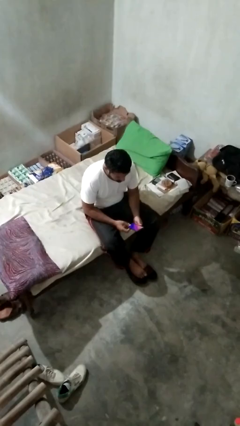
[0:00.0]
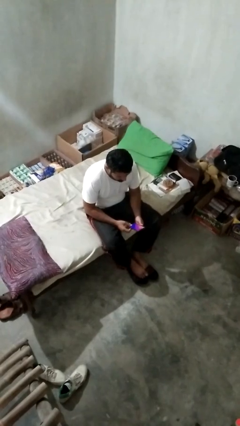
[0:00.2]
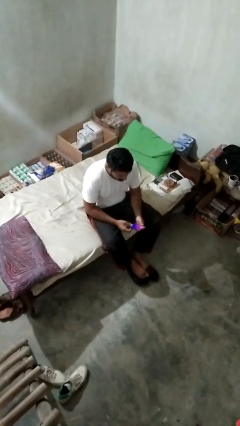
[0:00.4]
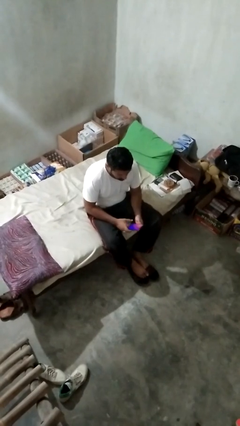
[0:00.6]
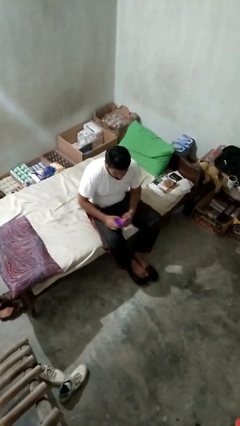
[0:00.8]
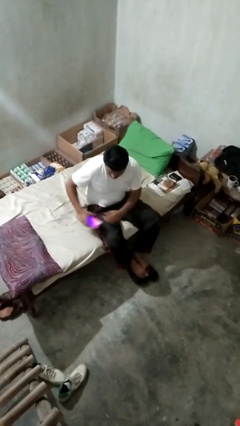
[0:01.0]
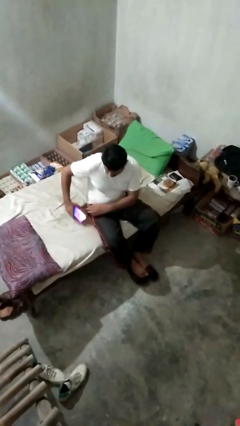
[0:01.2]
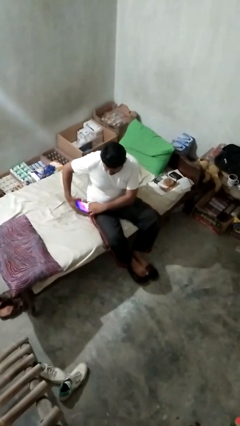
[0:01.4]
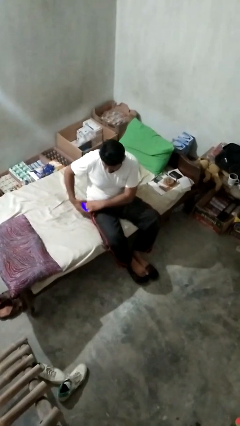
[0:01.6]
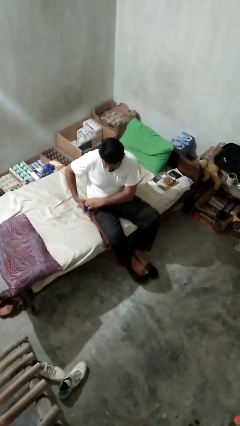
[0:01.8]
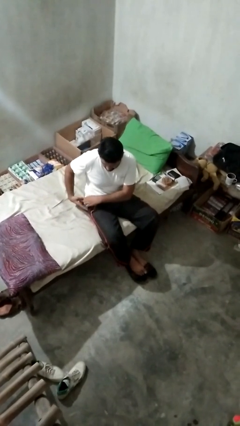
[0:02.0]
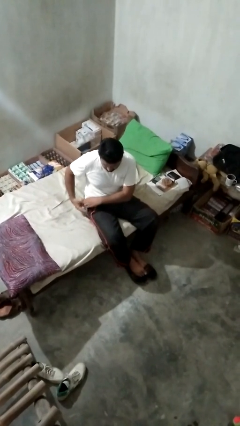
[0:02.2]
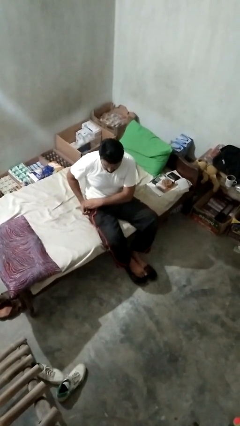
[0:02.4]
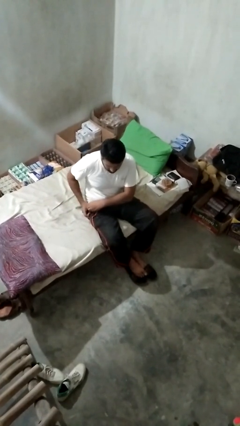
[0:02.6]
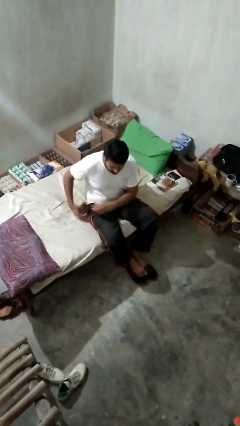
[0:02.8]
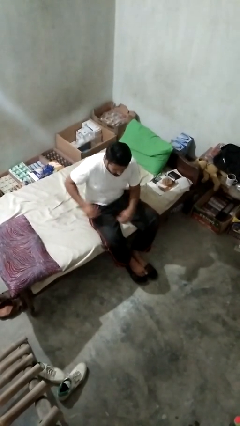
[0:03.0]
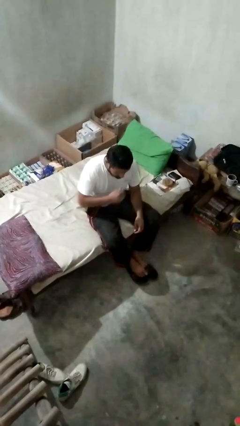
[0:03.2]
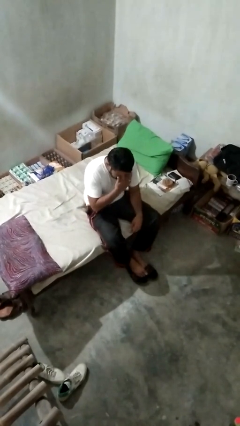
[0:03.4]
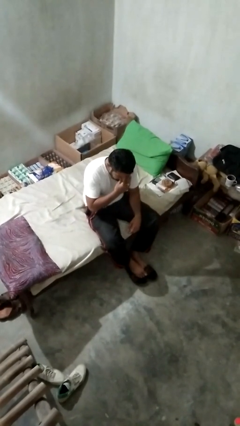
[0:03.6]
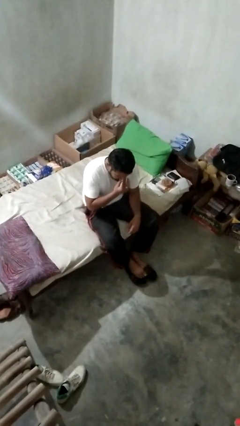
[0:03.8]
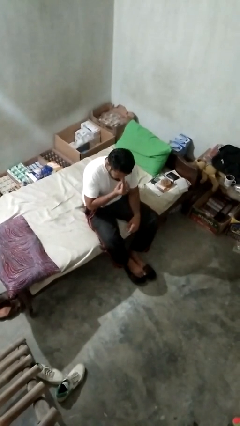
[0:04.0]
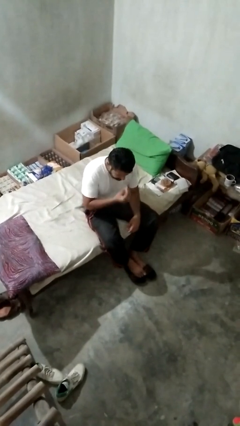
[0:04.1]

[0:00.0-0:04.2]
person puts phone into pocket

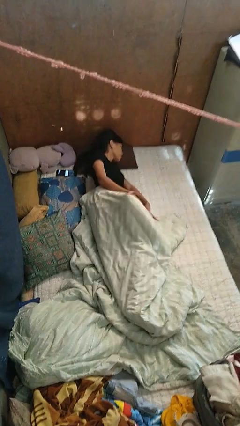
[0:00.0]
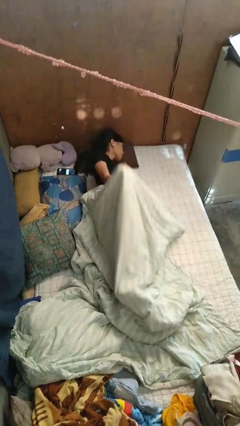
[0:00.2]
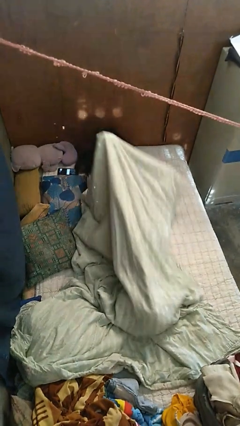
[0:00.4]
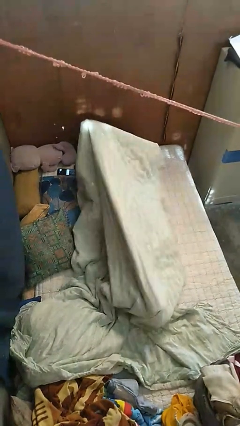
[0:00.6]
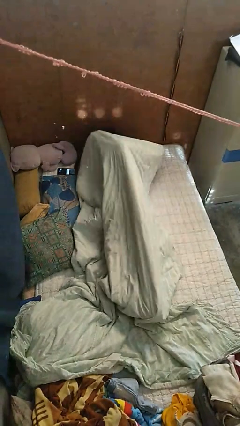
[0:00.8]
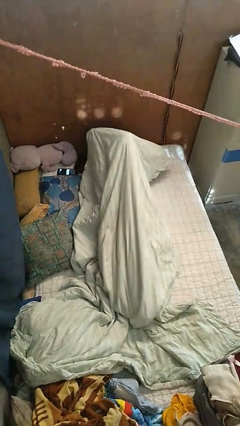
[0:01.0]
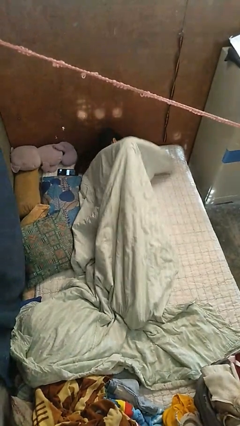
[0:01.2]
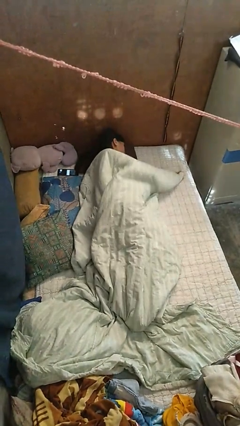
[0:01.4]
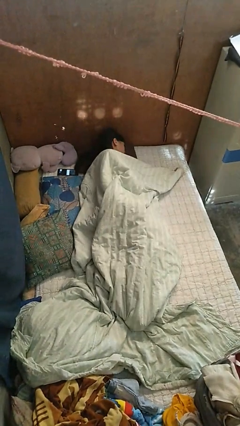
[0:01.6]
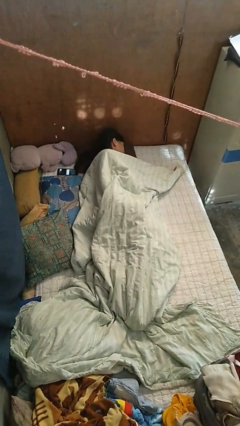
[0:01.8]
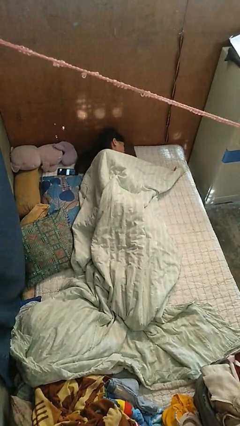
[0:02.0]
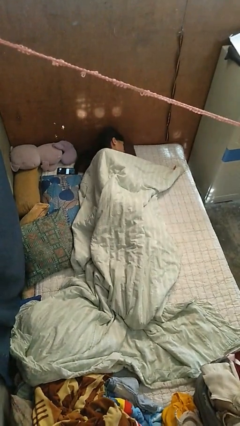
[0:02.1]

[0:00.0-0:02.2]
person covers with bedsheets

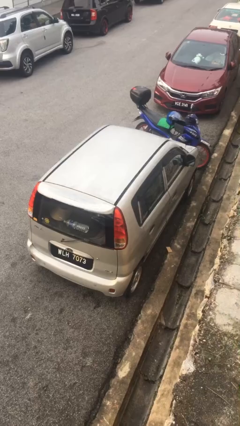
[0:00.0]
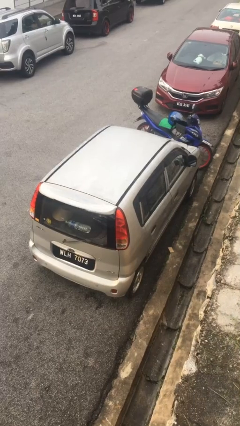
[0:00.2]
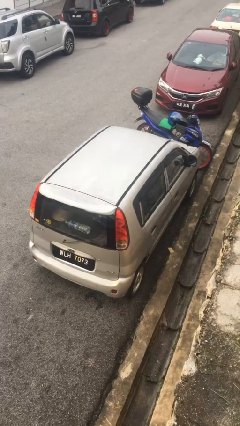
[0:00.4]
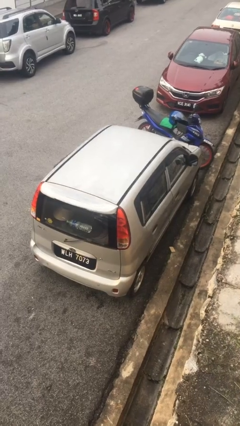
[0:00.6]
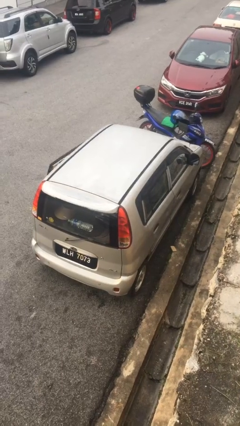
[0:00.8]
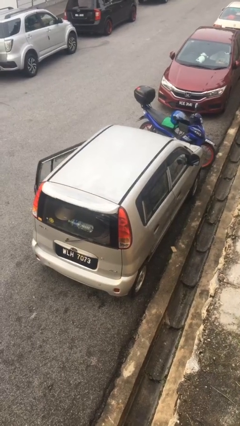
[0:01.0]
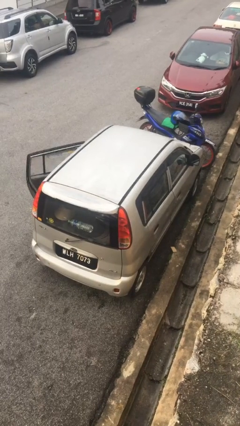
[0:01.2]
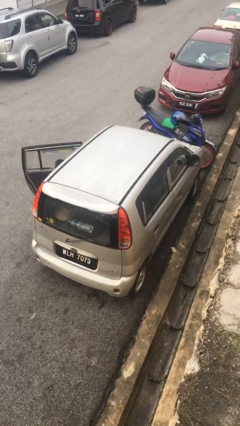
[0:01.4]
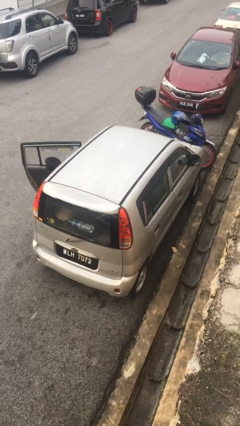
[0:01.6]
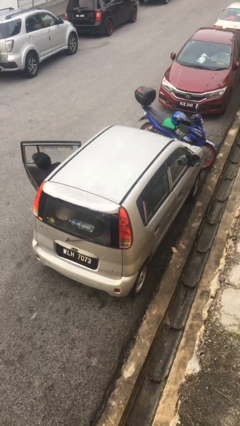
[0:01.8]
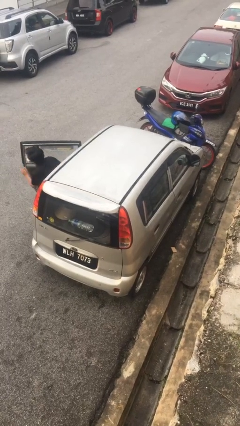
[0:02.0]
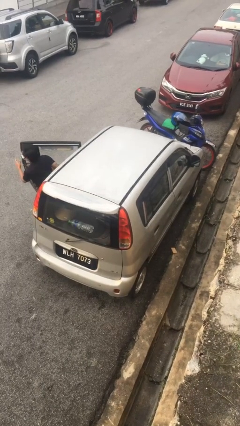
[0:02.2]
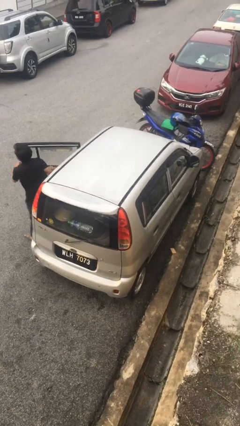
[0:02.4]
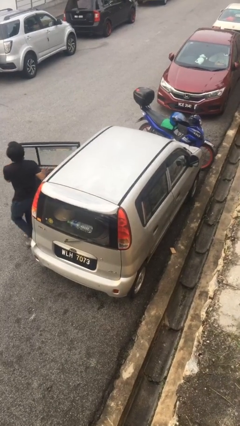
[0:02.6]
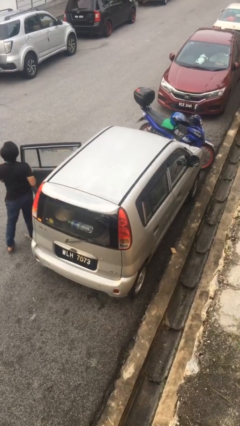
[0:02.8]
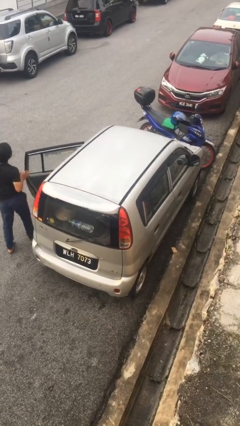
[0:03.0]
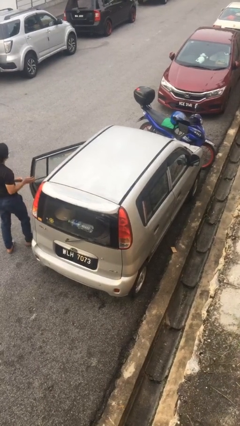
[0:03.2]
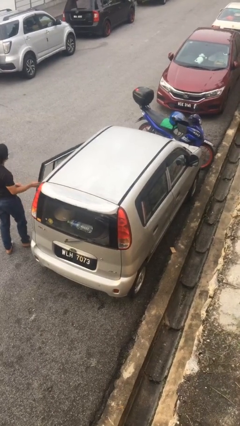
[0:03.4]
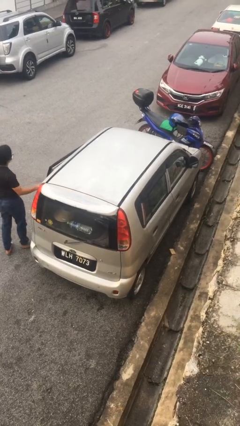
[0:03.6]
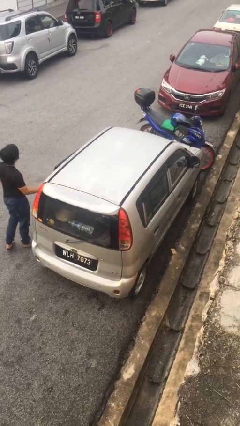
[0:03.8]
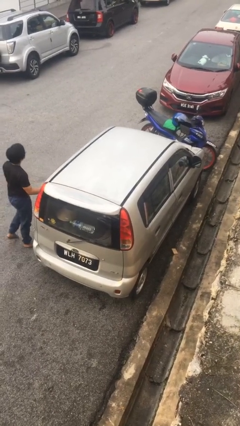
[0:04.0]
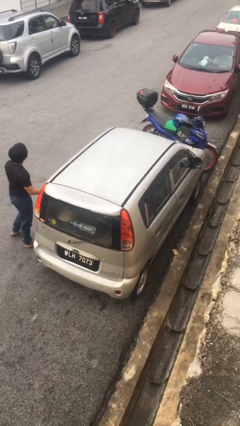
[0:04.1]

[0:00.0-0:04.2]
car drops off person

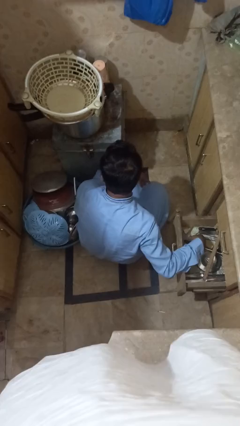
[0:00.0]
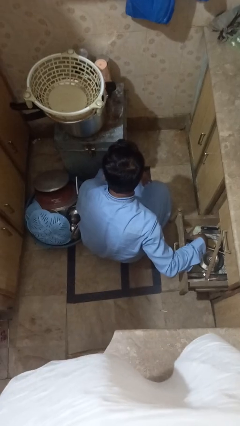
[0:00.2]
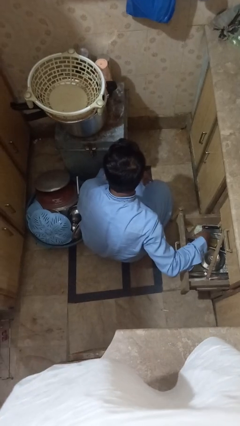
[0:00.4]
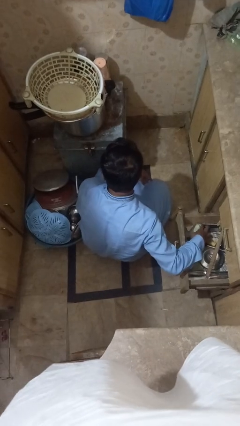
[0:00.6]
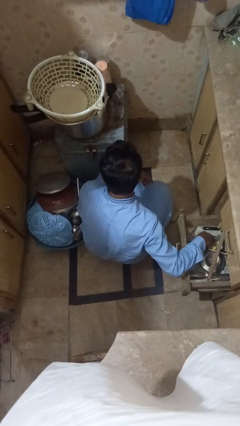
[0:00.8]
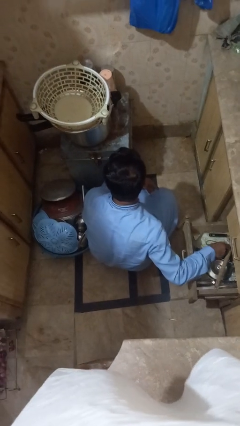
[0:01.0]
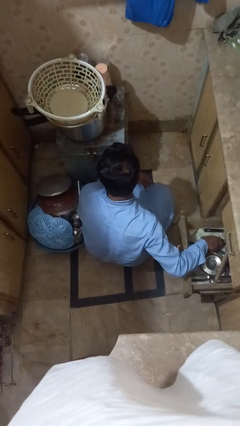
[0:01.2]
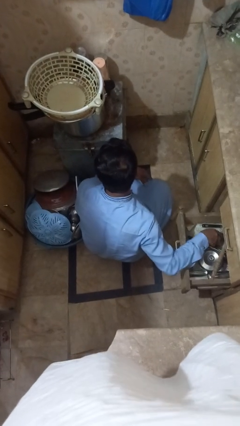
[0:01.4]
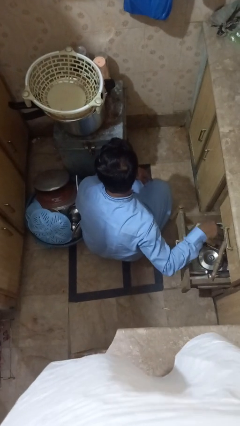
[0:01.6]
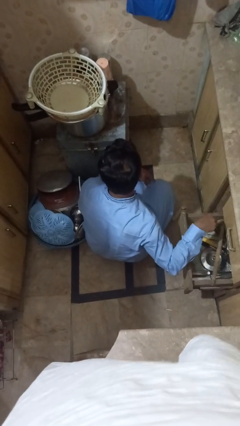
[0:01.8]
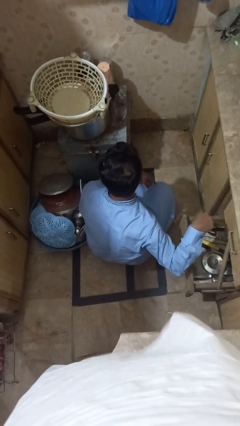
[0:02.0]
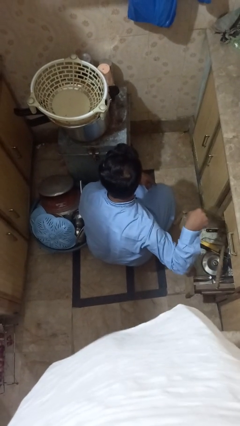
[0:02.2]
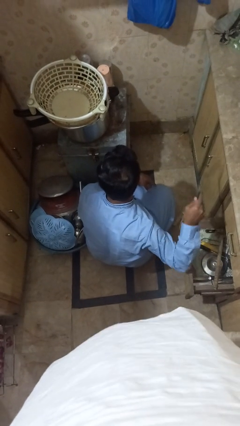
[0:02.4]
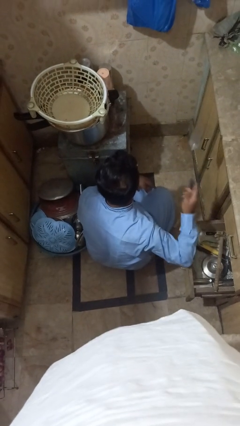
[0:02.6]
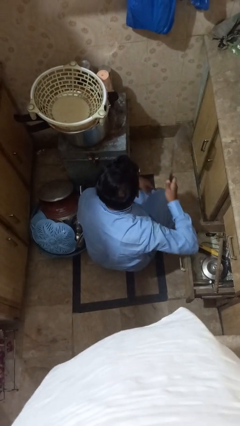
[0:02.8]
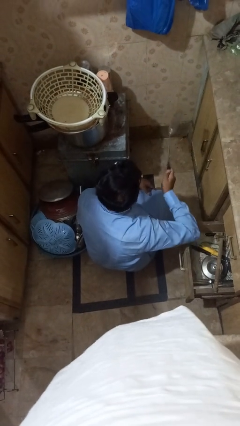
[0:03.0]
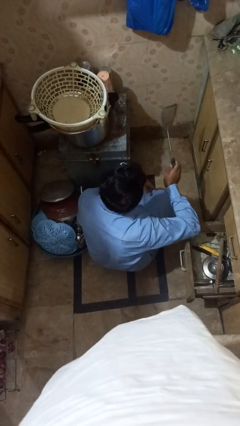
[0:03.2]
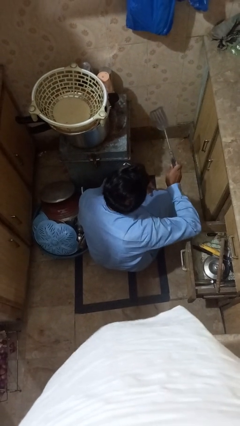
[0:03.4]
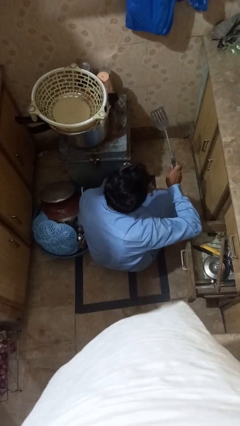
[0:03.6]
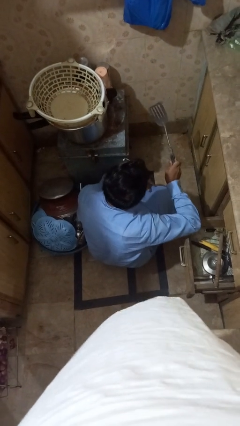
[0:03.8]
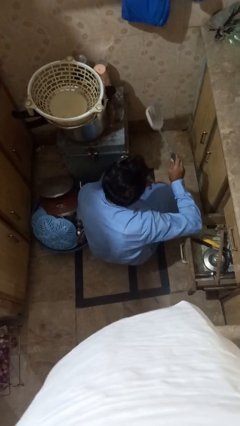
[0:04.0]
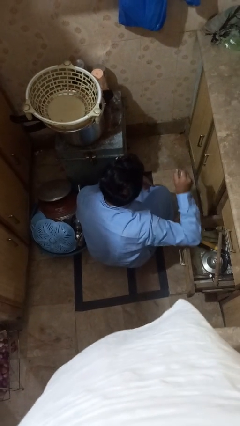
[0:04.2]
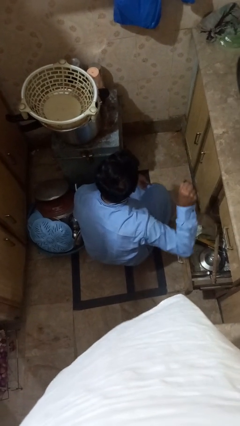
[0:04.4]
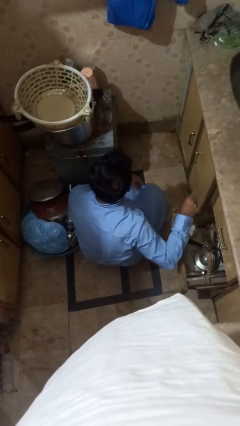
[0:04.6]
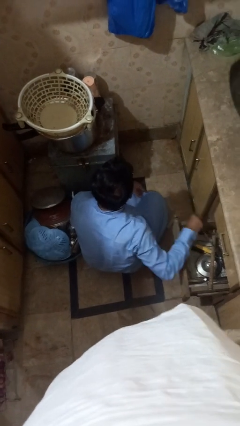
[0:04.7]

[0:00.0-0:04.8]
person searches in kitchen drawer

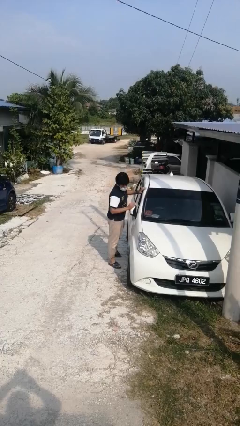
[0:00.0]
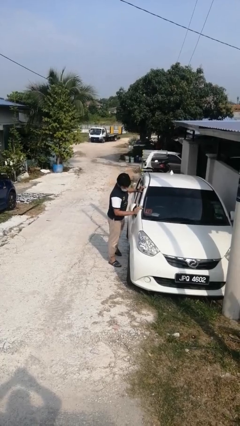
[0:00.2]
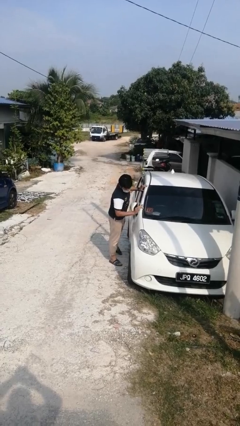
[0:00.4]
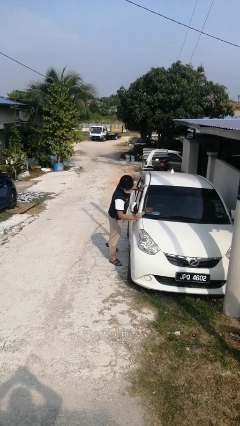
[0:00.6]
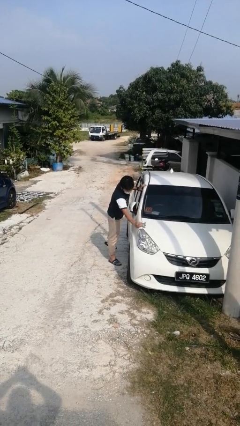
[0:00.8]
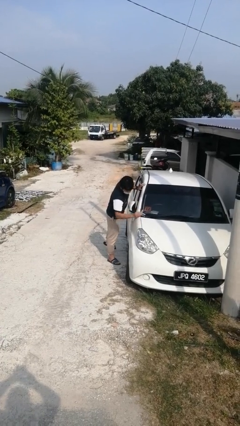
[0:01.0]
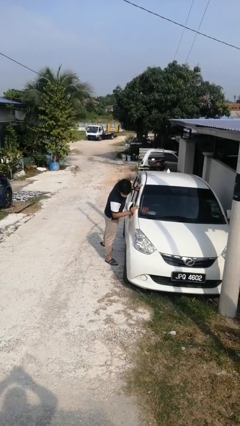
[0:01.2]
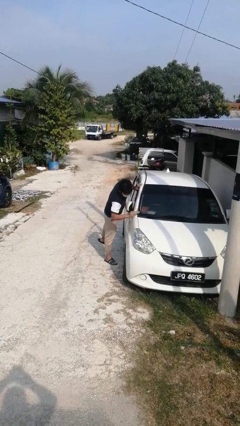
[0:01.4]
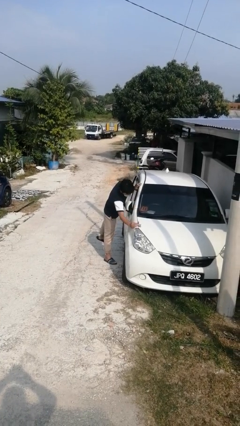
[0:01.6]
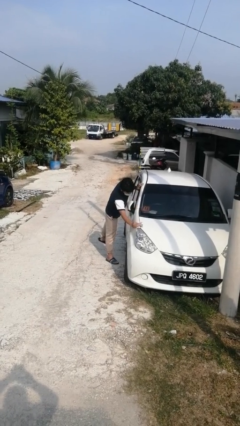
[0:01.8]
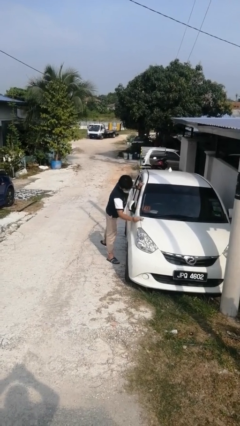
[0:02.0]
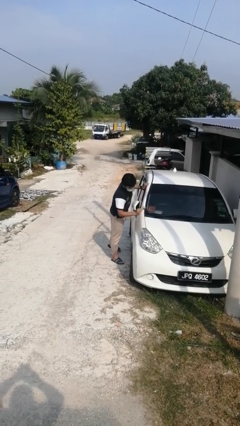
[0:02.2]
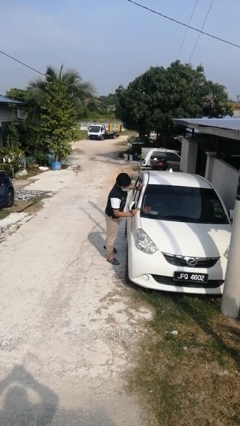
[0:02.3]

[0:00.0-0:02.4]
person polishes car with rag

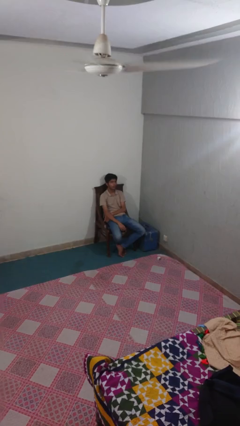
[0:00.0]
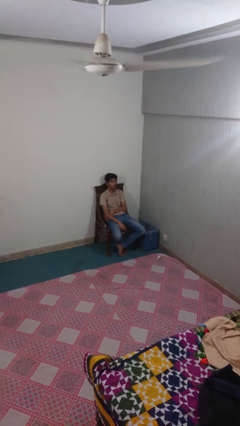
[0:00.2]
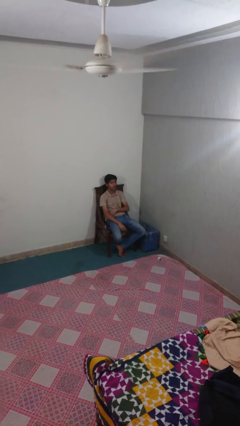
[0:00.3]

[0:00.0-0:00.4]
person points at person
